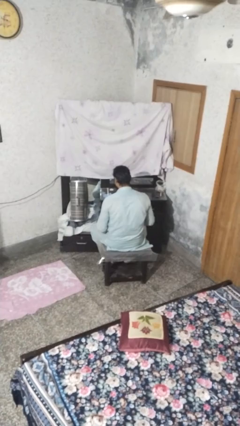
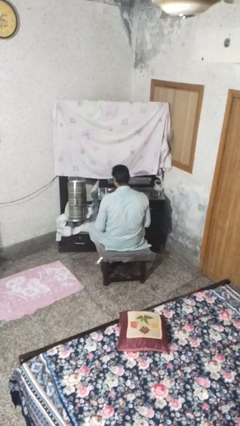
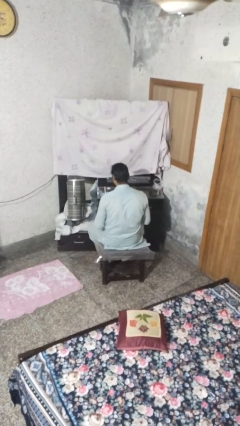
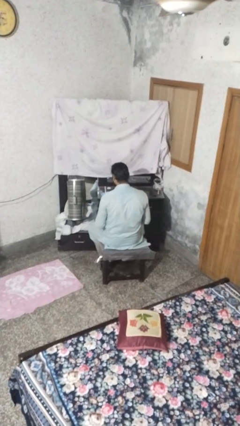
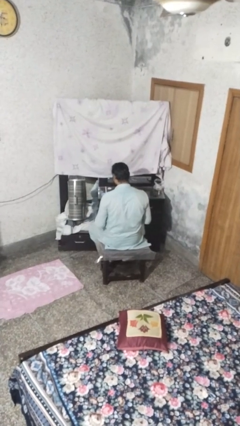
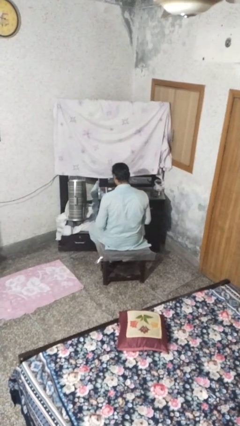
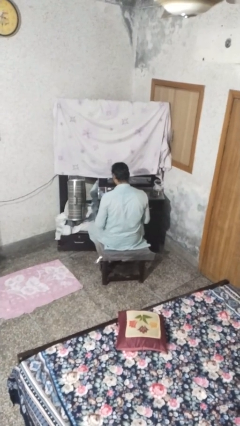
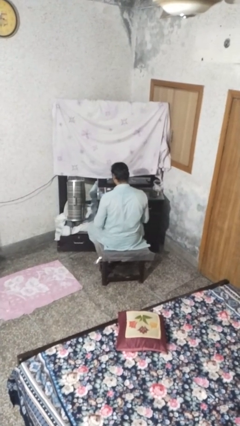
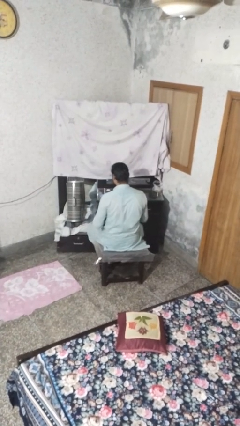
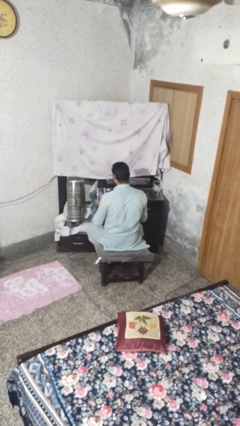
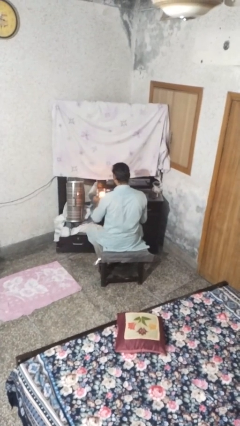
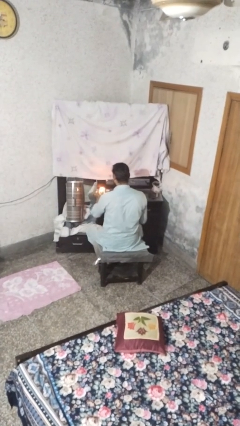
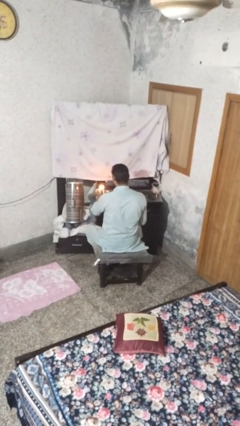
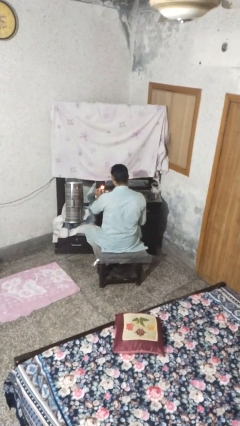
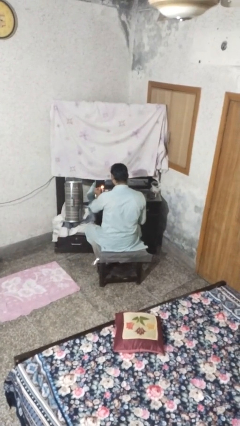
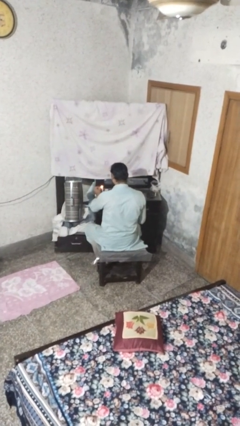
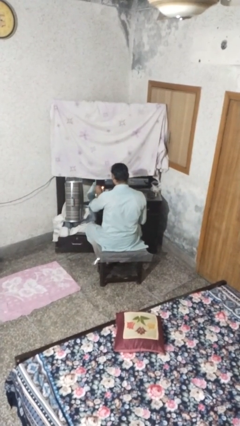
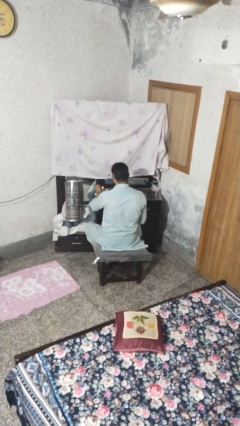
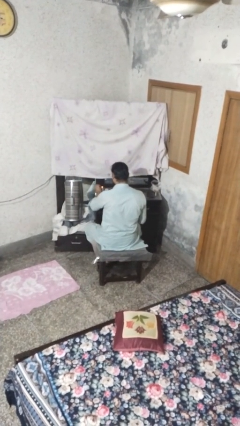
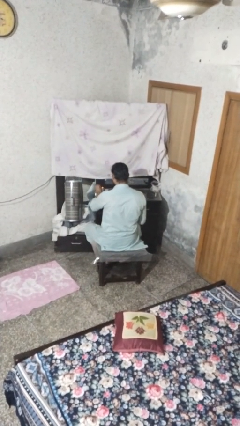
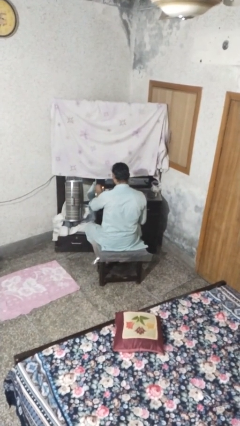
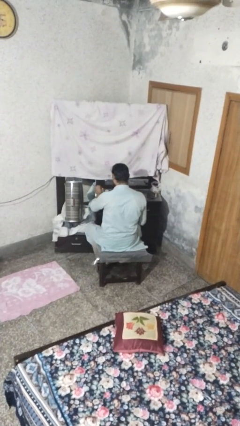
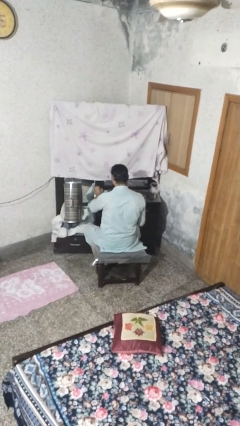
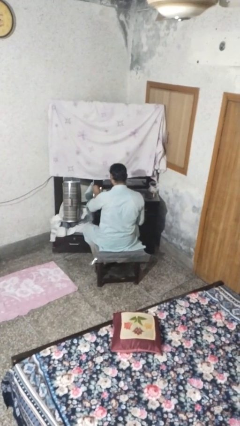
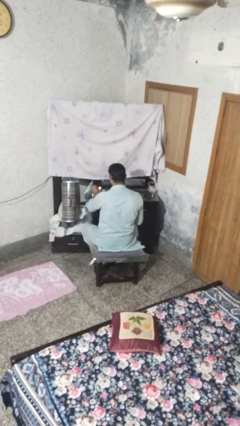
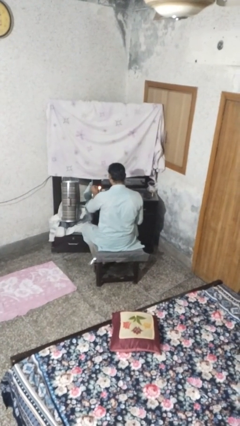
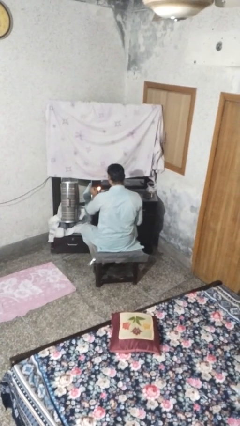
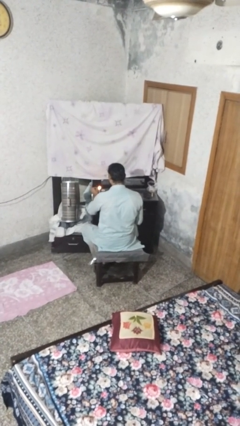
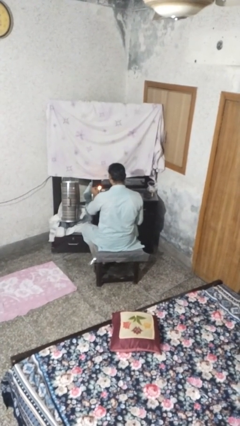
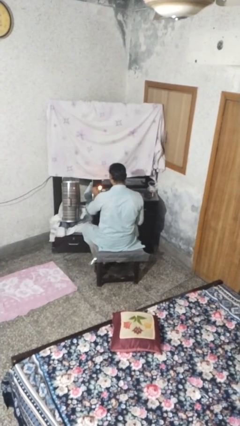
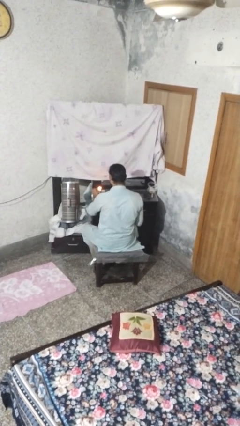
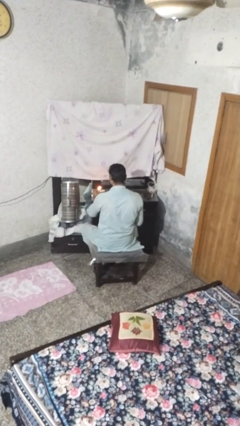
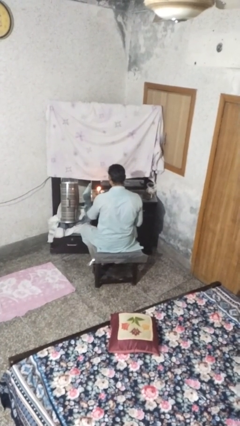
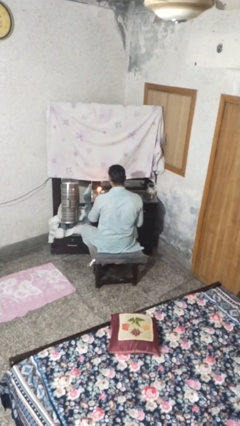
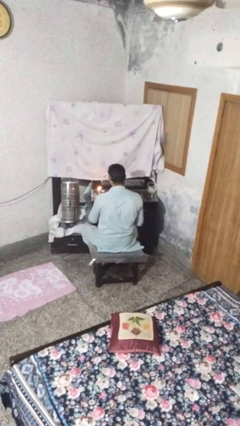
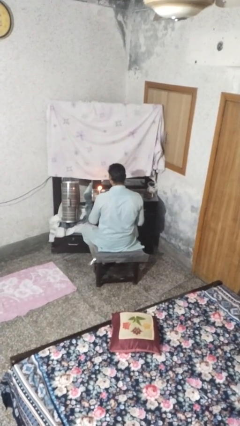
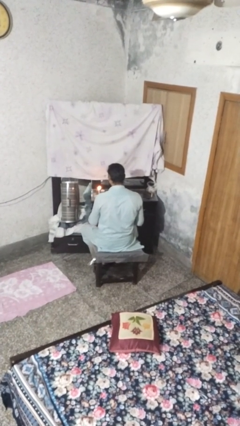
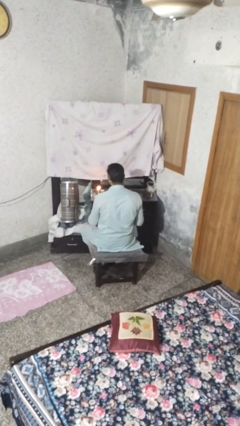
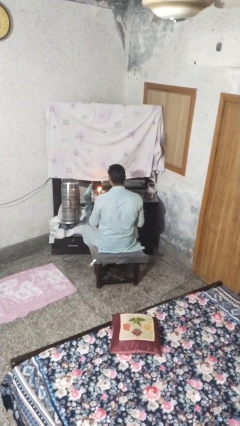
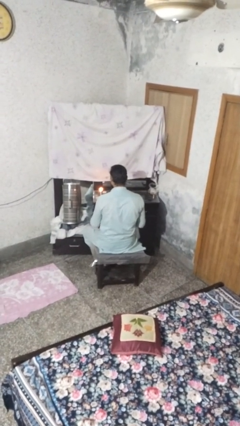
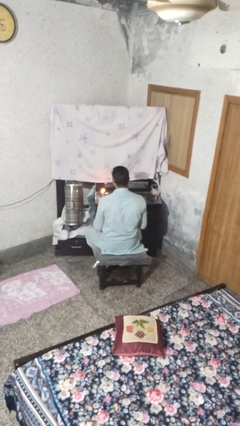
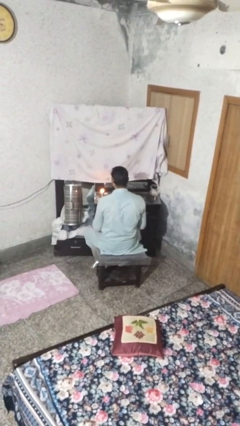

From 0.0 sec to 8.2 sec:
person lights candle

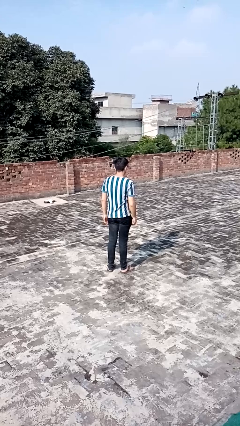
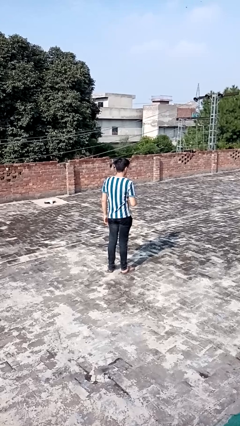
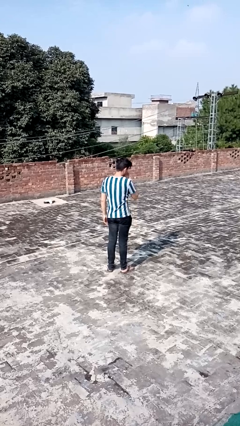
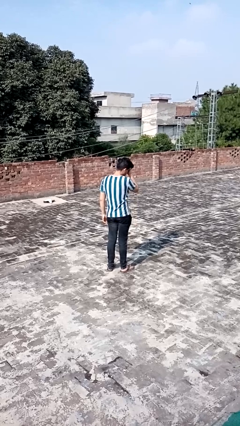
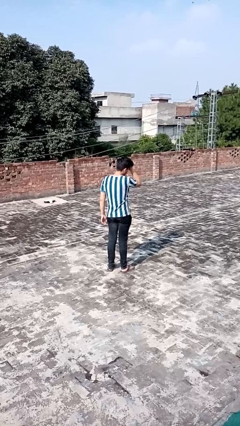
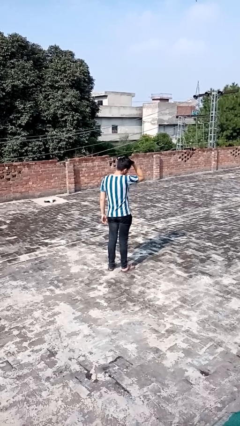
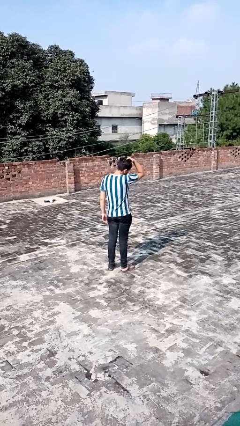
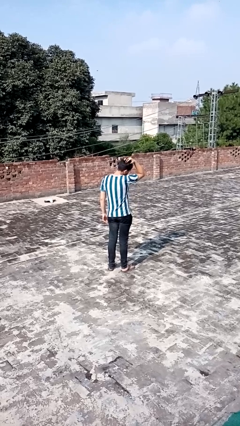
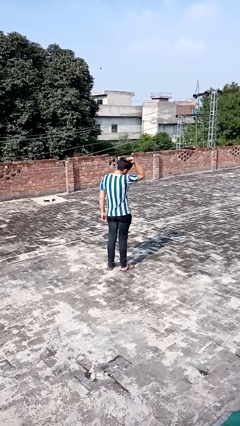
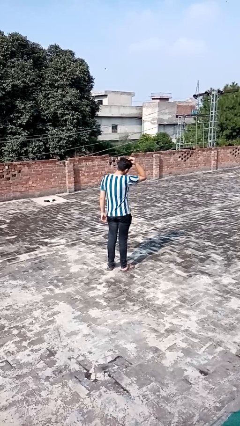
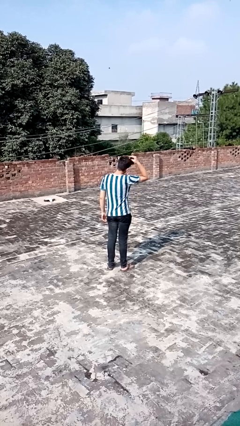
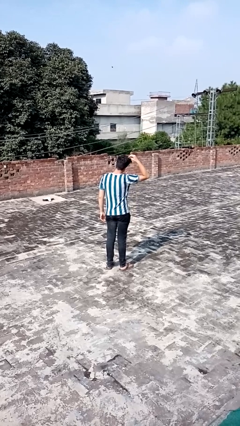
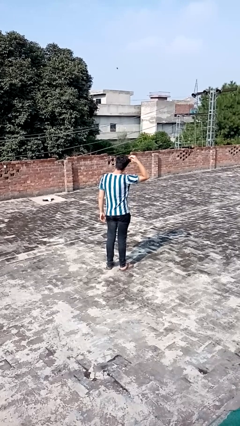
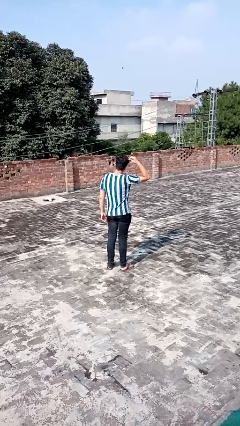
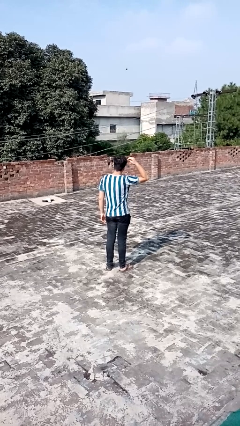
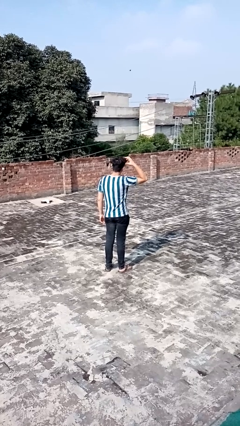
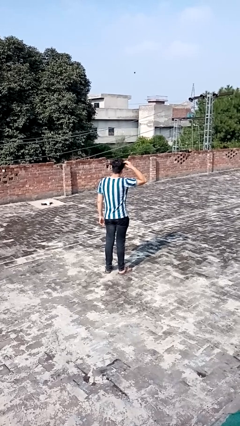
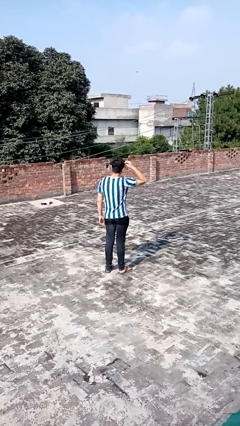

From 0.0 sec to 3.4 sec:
person strokes hair

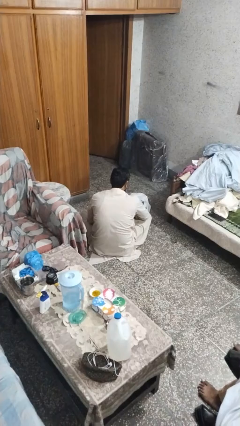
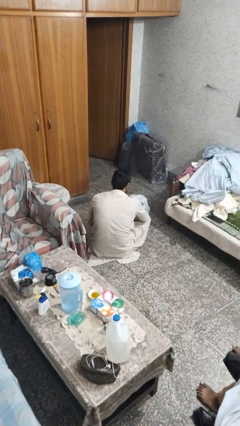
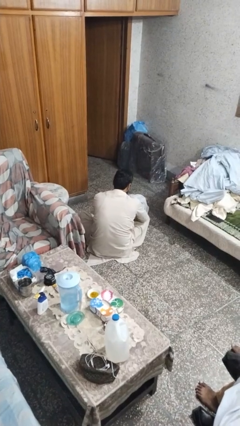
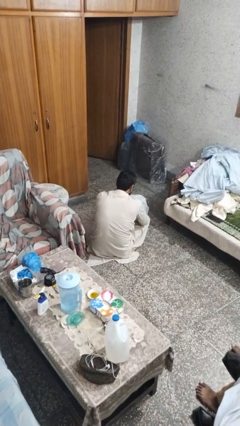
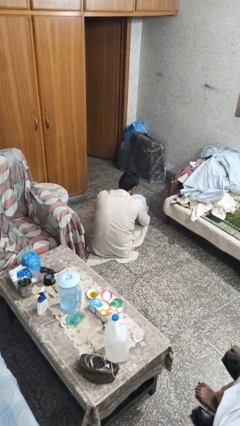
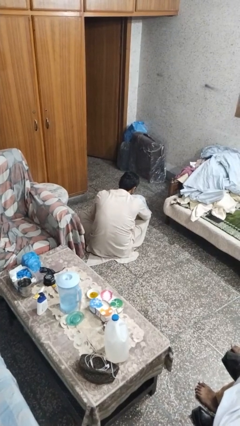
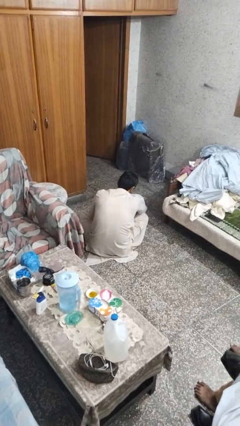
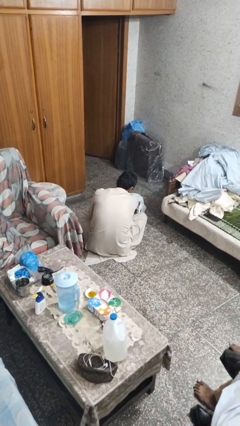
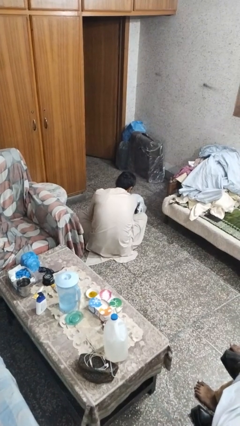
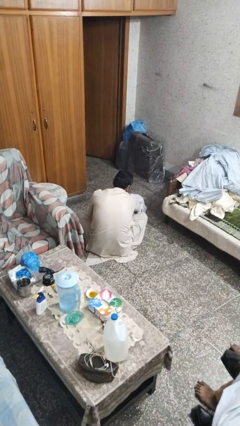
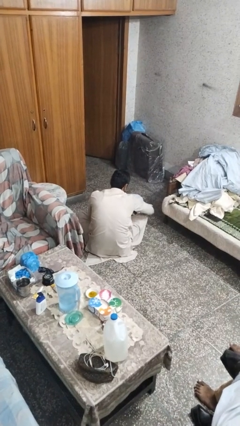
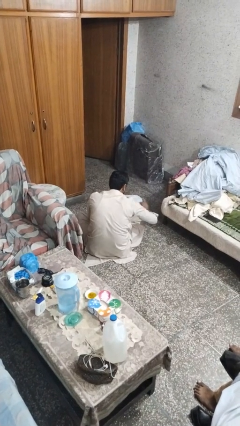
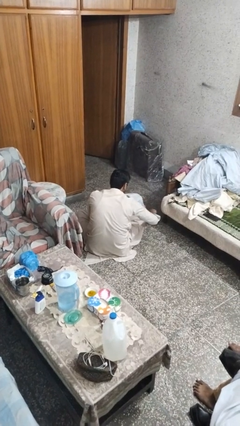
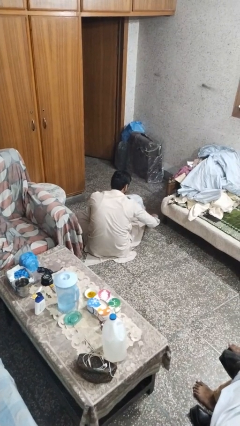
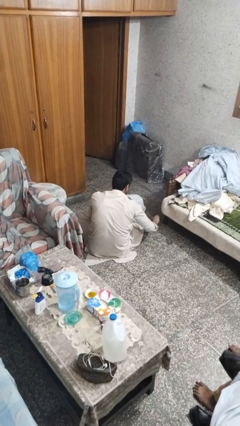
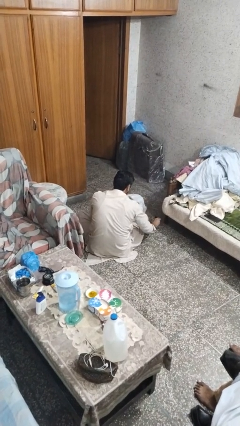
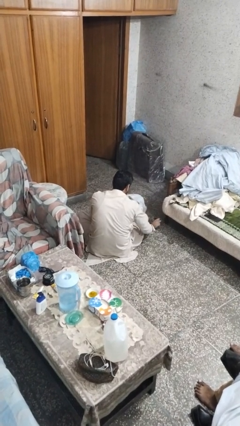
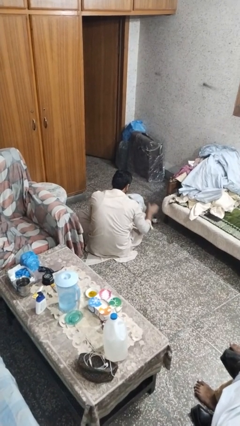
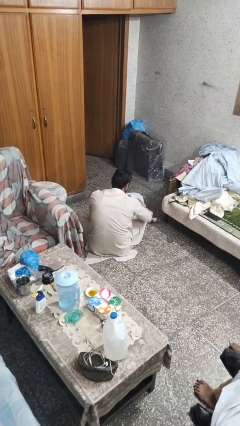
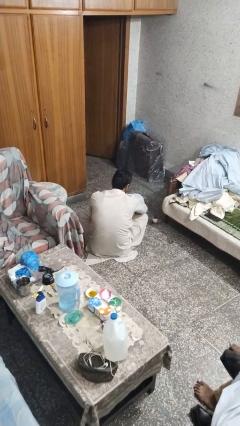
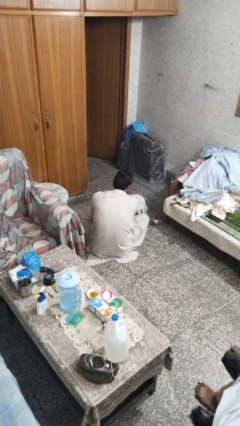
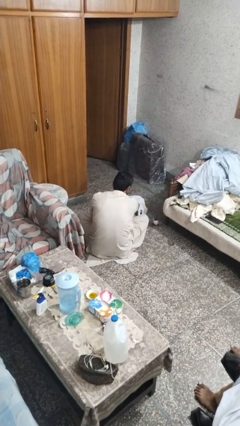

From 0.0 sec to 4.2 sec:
person takes object from bag

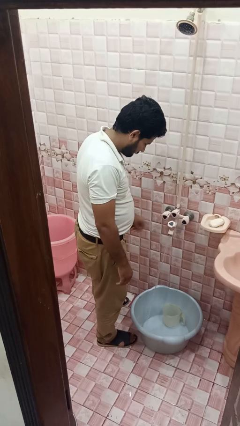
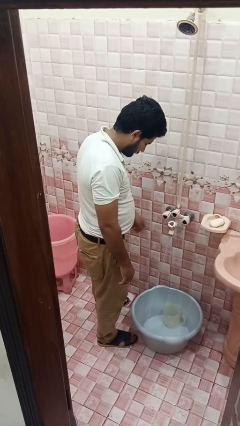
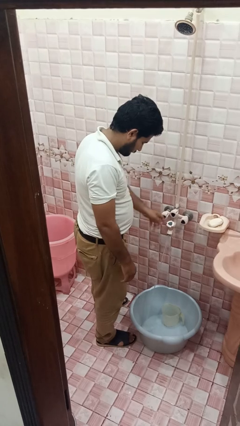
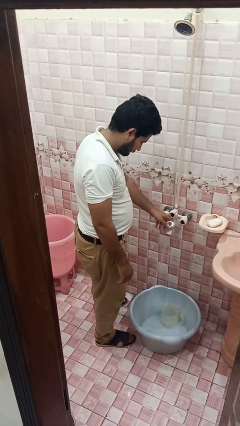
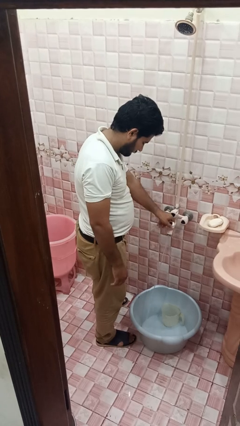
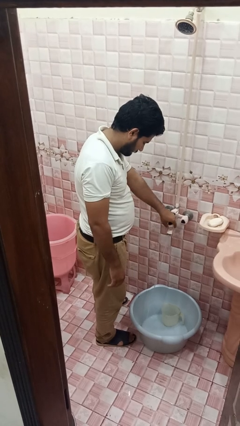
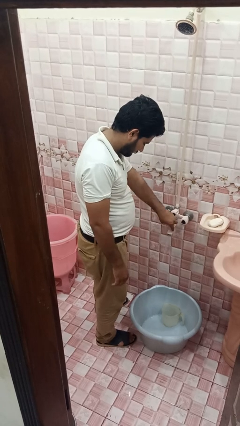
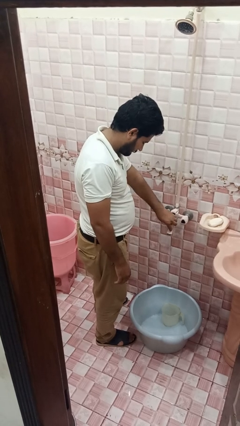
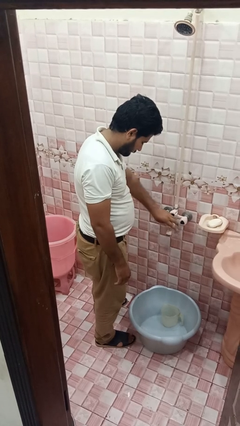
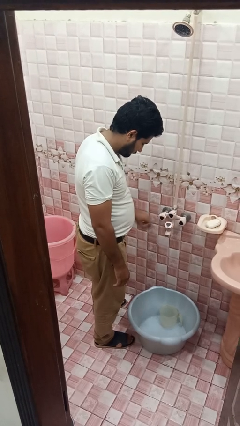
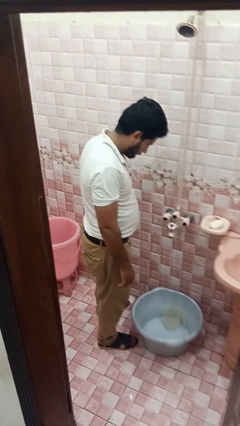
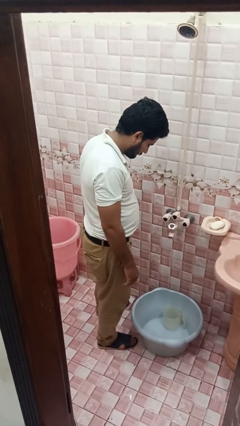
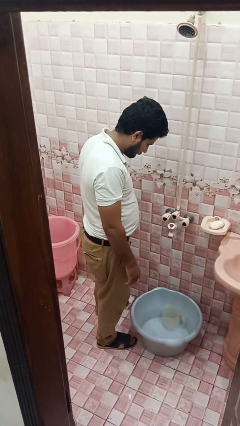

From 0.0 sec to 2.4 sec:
person turns off faucet
